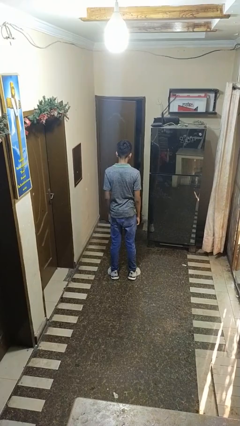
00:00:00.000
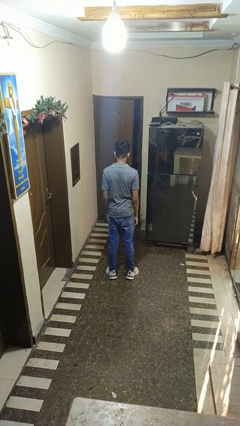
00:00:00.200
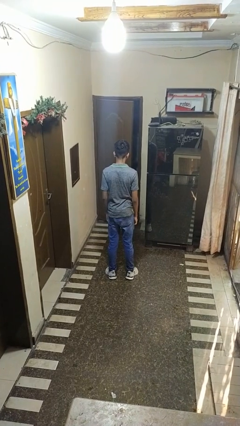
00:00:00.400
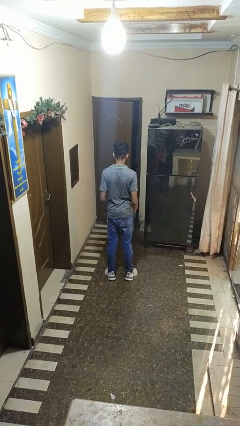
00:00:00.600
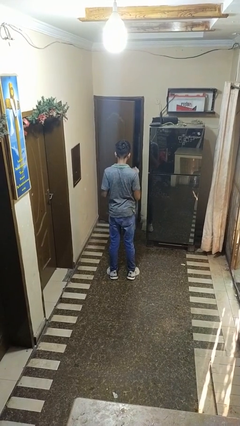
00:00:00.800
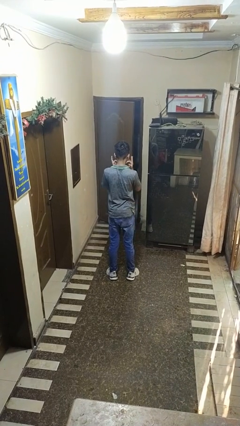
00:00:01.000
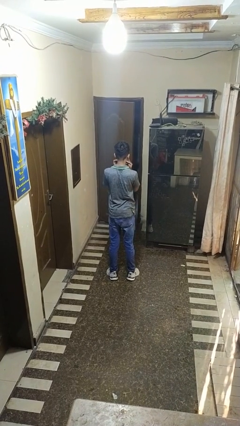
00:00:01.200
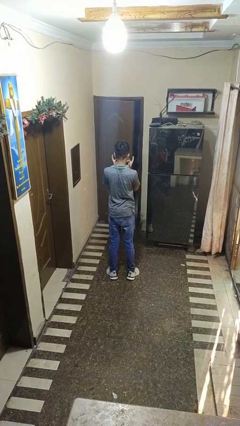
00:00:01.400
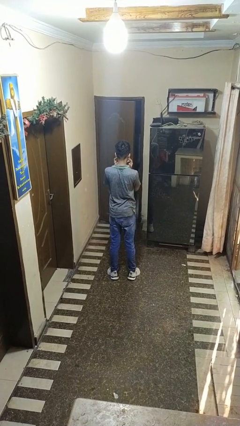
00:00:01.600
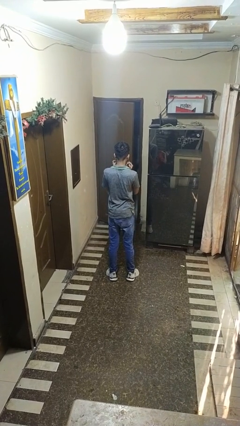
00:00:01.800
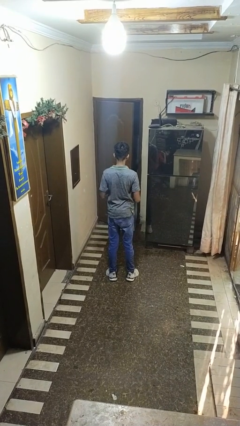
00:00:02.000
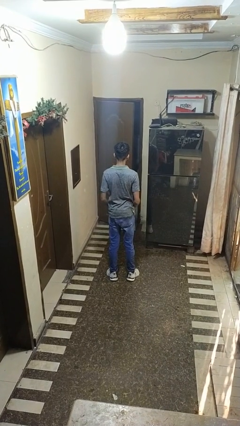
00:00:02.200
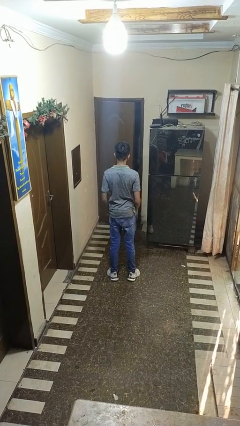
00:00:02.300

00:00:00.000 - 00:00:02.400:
person touches earlobe

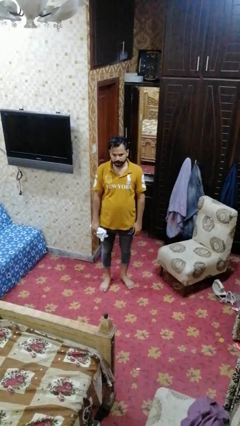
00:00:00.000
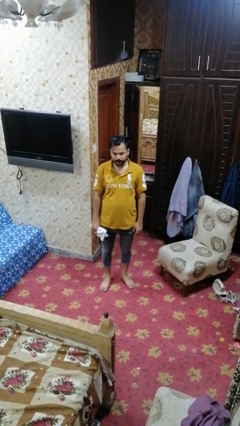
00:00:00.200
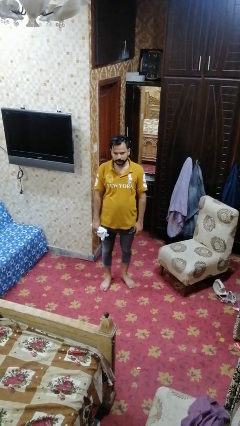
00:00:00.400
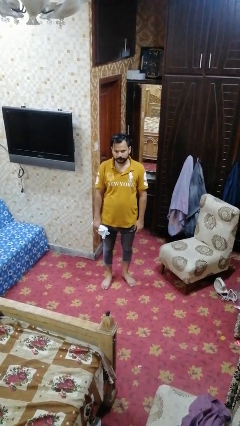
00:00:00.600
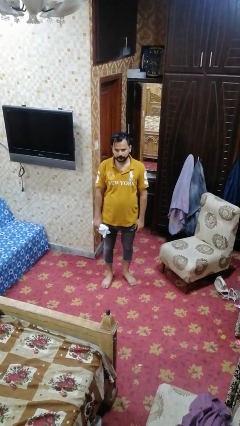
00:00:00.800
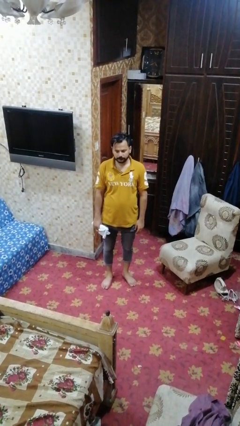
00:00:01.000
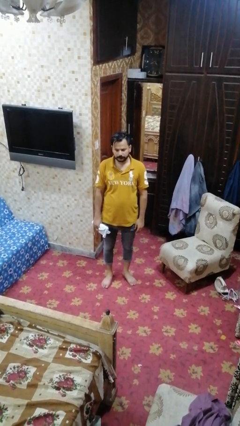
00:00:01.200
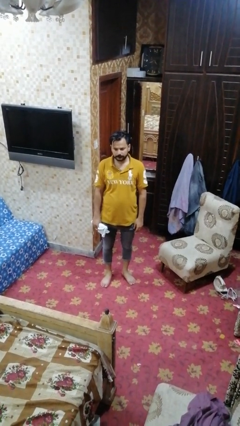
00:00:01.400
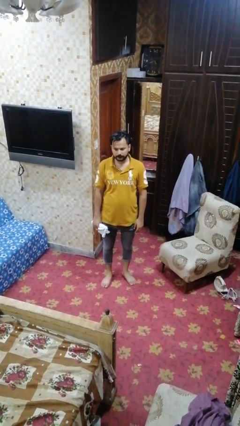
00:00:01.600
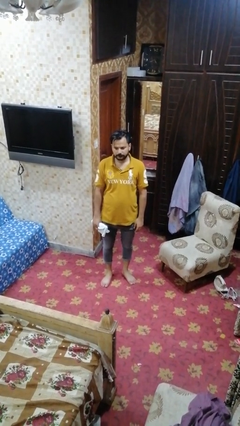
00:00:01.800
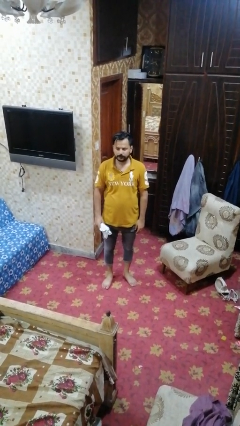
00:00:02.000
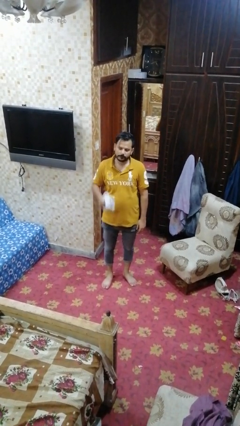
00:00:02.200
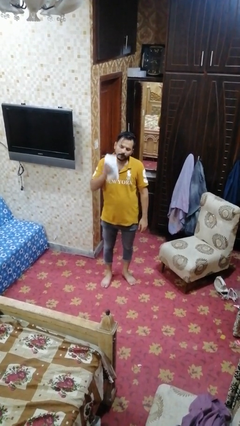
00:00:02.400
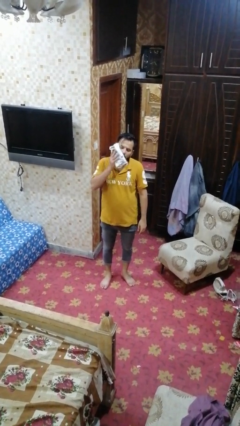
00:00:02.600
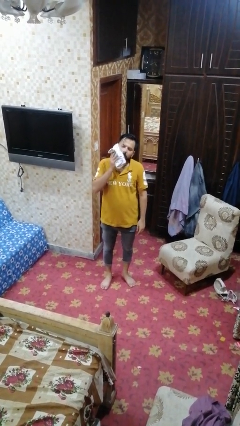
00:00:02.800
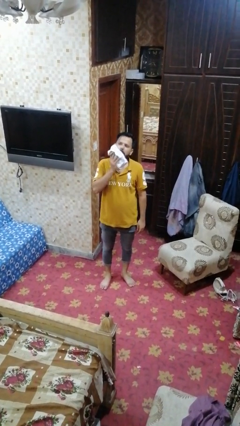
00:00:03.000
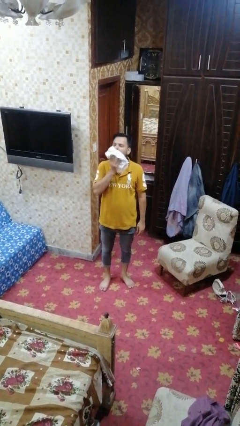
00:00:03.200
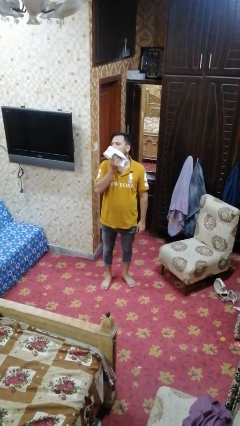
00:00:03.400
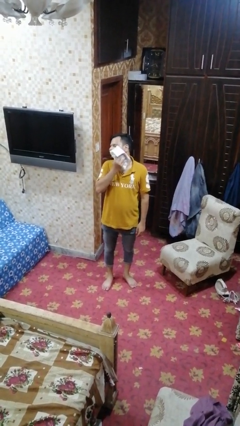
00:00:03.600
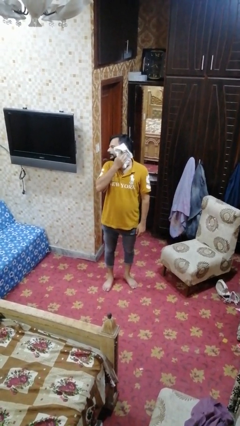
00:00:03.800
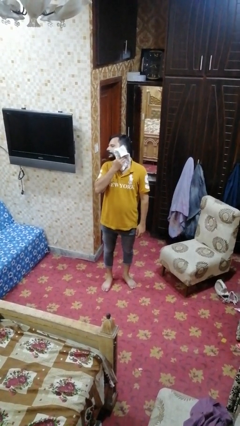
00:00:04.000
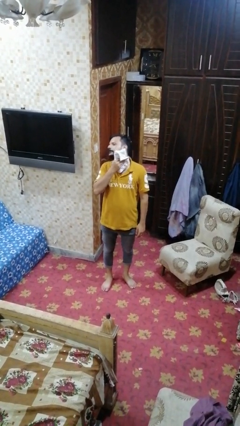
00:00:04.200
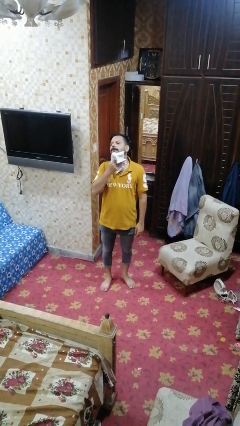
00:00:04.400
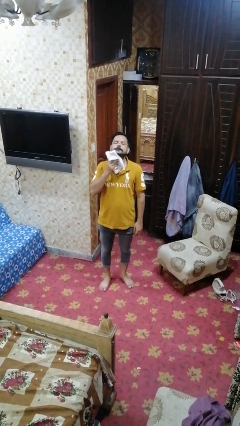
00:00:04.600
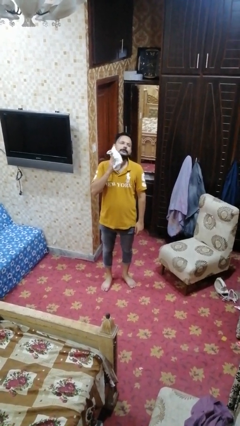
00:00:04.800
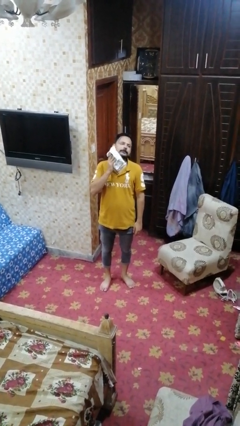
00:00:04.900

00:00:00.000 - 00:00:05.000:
person wipes mouth with napkin

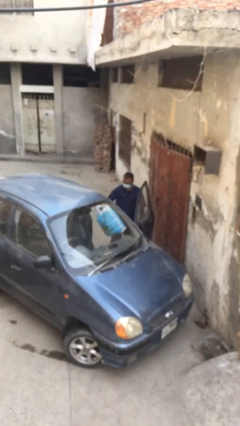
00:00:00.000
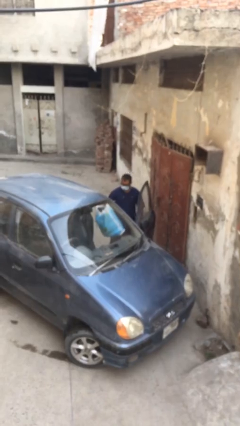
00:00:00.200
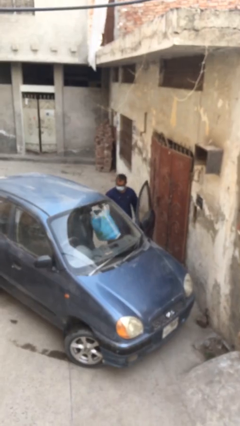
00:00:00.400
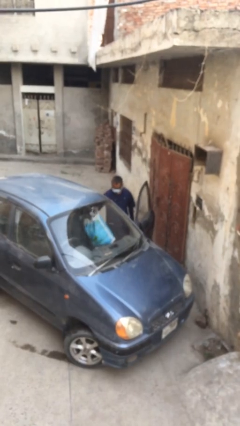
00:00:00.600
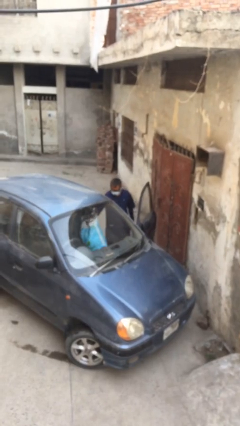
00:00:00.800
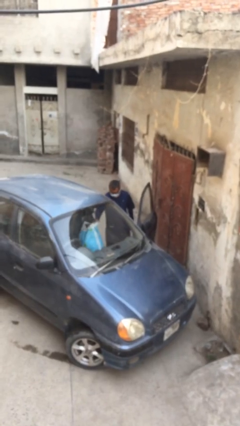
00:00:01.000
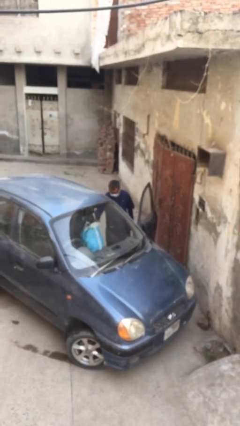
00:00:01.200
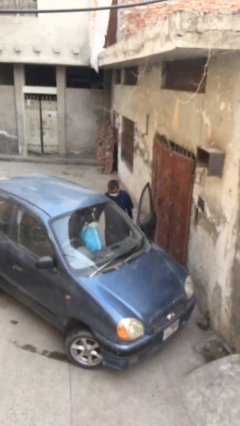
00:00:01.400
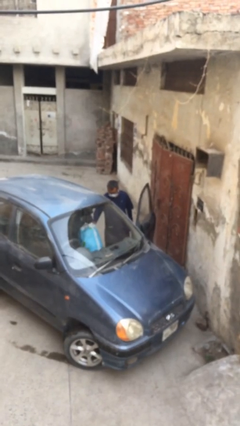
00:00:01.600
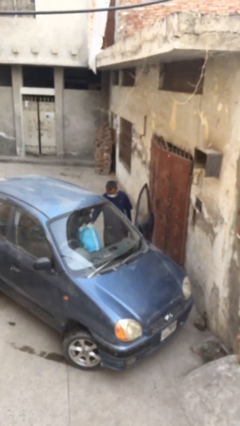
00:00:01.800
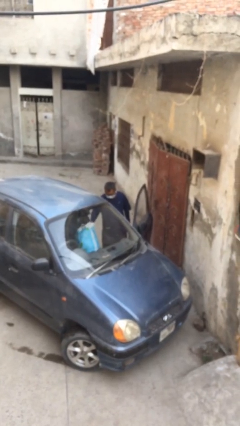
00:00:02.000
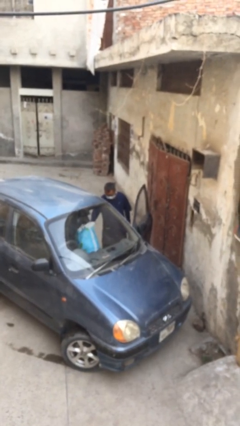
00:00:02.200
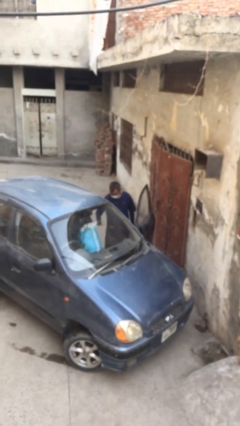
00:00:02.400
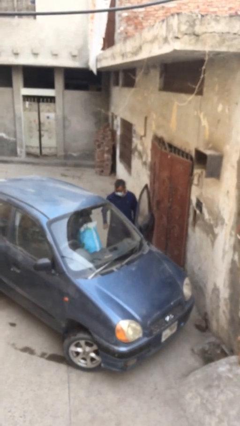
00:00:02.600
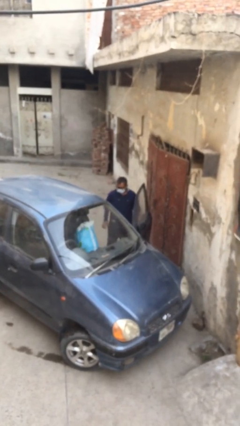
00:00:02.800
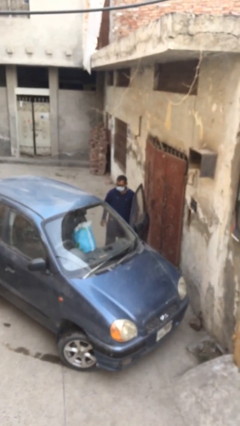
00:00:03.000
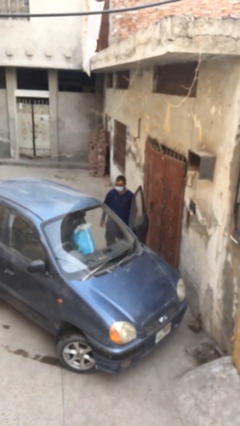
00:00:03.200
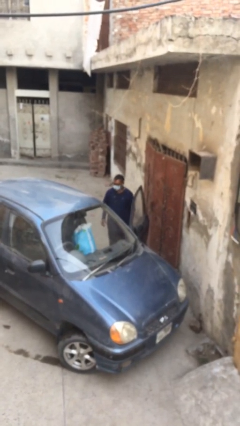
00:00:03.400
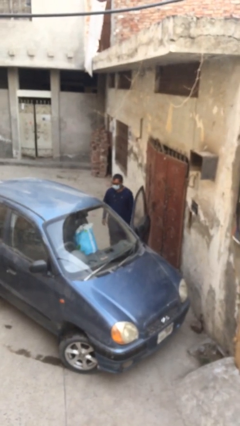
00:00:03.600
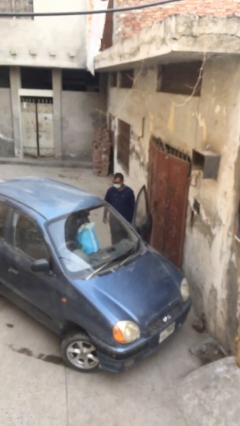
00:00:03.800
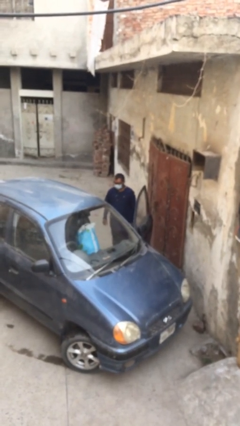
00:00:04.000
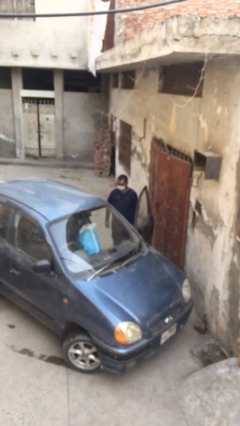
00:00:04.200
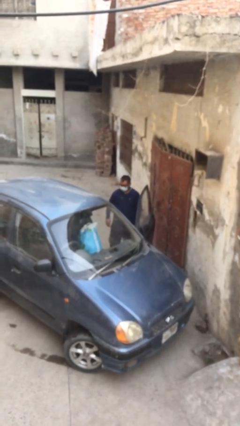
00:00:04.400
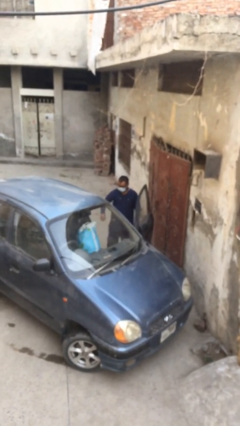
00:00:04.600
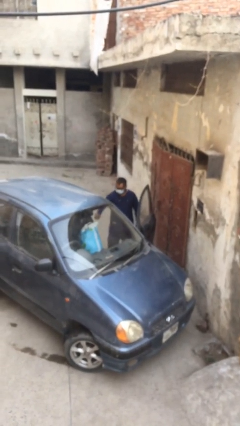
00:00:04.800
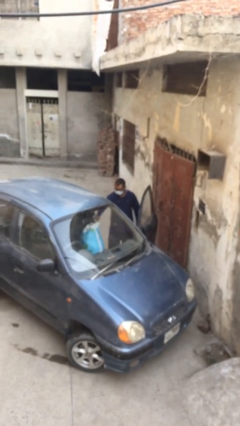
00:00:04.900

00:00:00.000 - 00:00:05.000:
person loads car

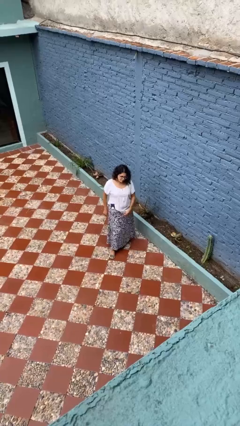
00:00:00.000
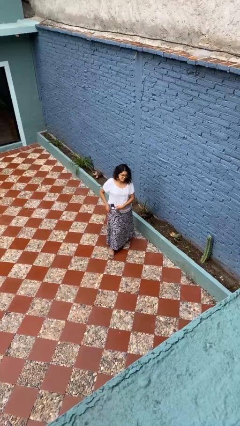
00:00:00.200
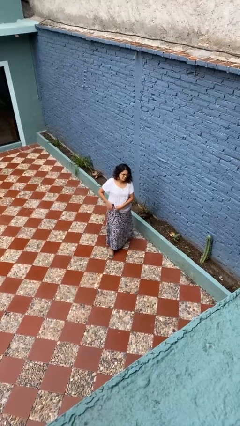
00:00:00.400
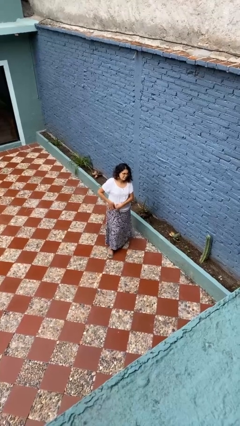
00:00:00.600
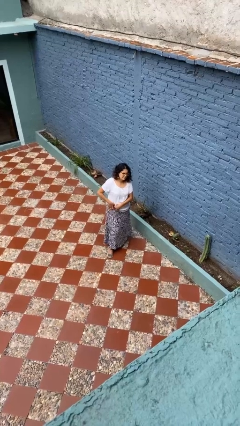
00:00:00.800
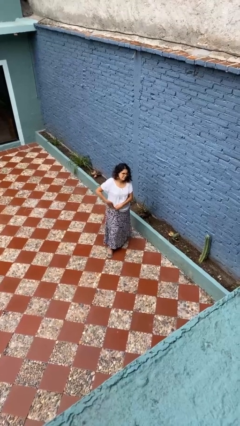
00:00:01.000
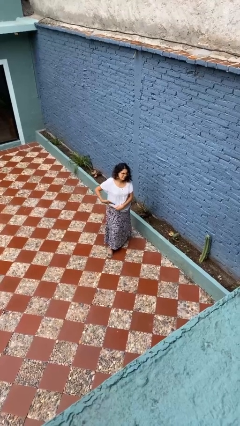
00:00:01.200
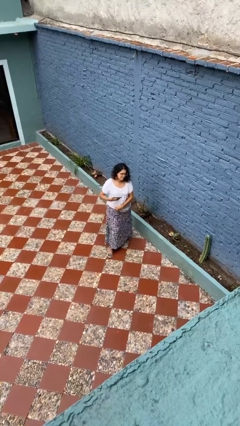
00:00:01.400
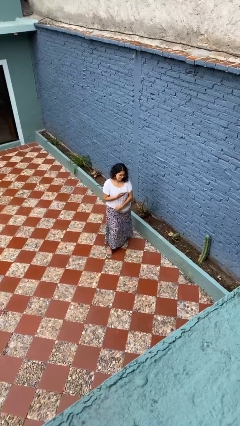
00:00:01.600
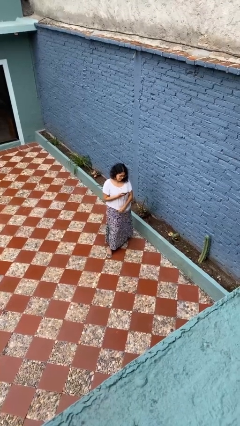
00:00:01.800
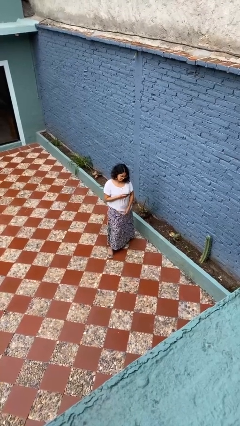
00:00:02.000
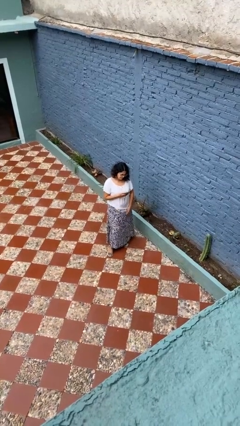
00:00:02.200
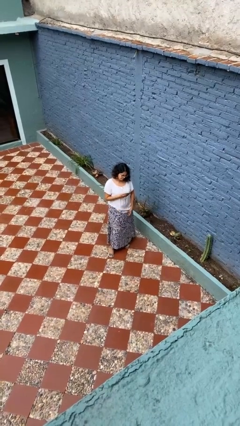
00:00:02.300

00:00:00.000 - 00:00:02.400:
person takes phone from pocket

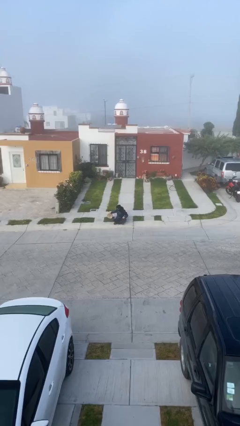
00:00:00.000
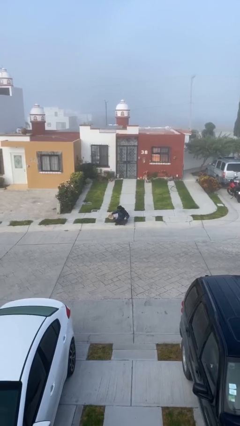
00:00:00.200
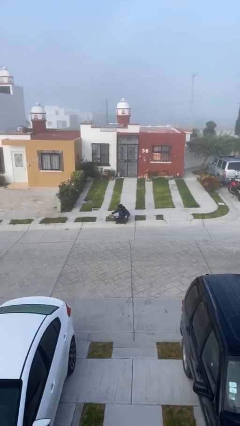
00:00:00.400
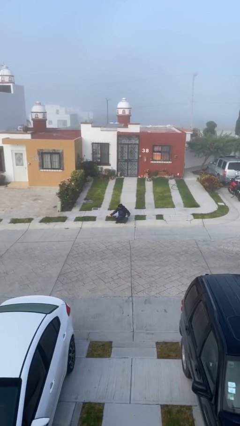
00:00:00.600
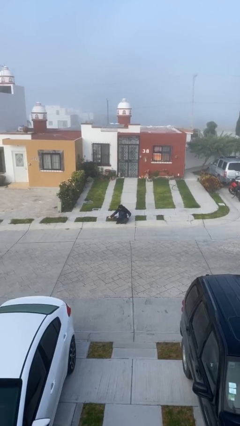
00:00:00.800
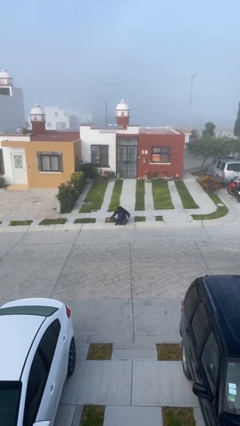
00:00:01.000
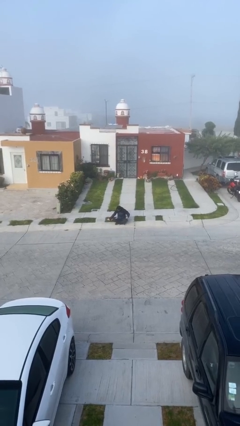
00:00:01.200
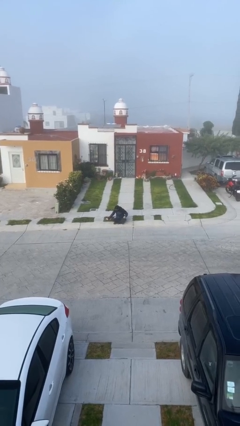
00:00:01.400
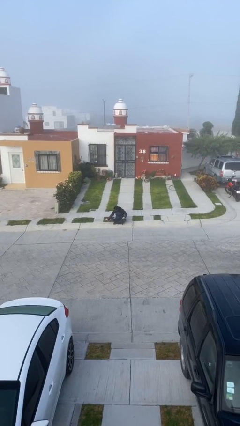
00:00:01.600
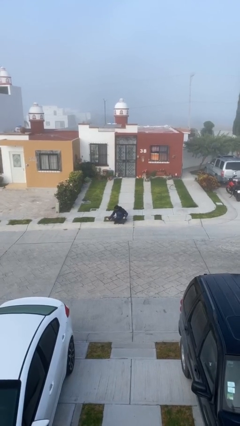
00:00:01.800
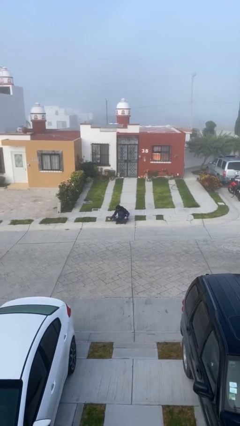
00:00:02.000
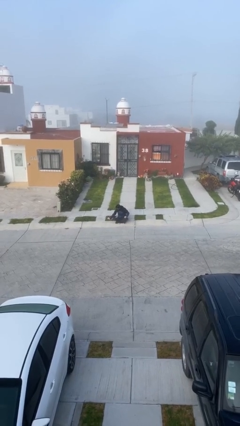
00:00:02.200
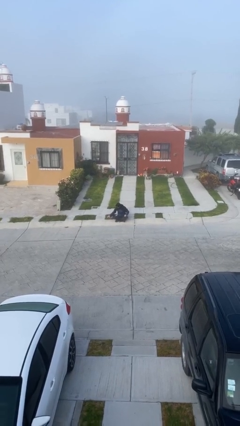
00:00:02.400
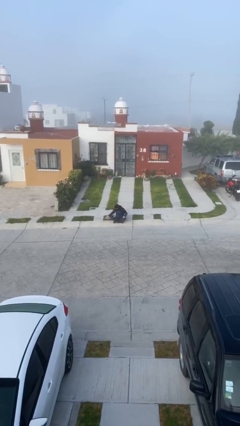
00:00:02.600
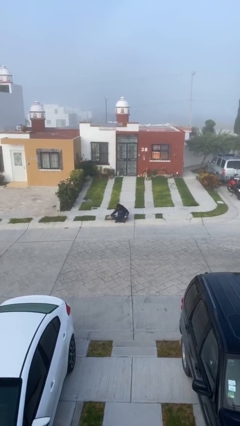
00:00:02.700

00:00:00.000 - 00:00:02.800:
person puts down object on floor
